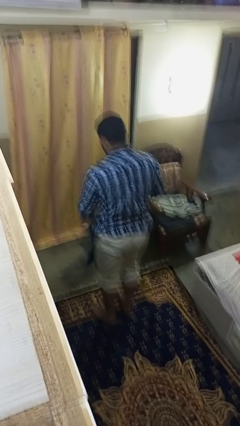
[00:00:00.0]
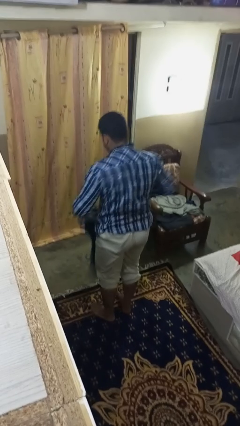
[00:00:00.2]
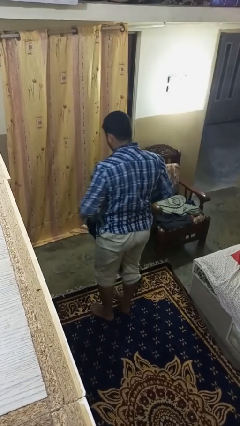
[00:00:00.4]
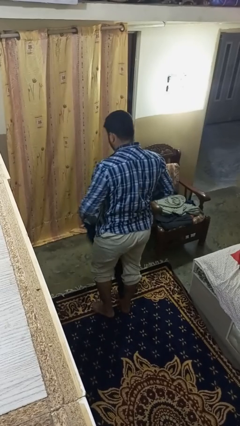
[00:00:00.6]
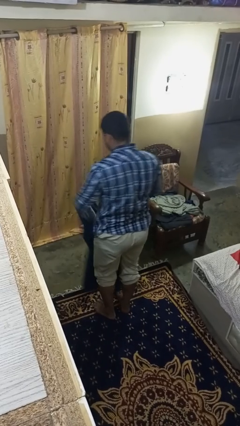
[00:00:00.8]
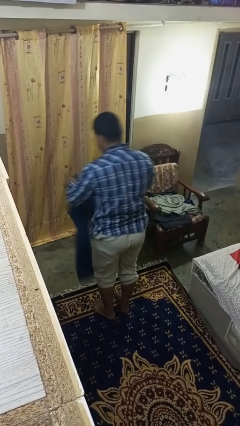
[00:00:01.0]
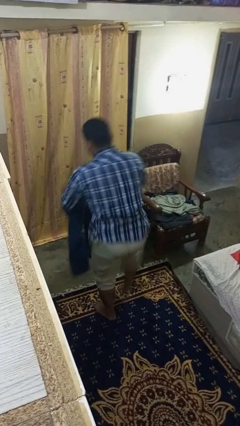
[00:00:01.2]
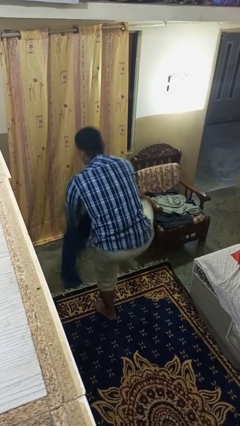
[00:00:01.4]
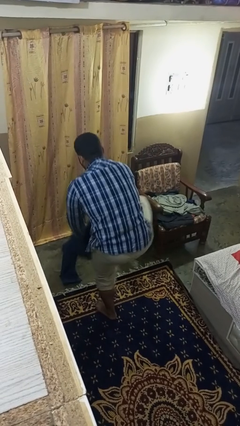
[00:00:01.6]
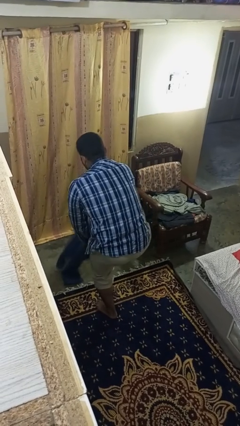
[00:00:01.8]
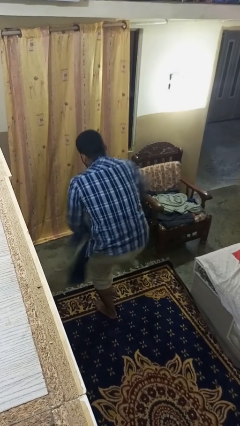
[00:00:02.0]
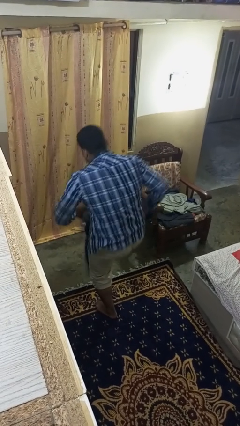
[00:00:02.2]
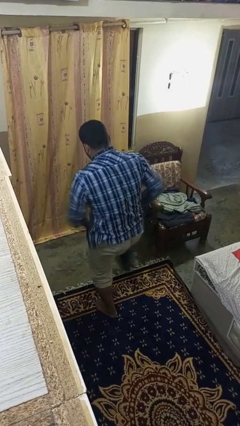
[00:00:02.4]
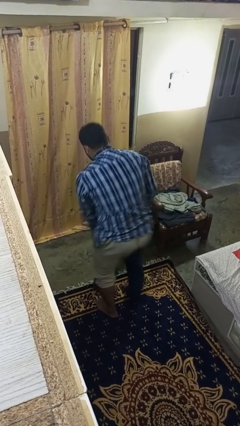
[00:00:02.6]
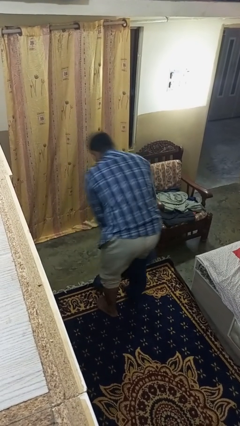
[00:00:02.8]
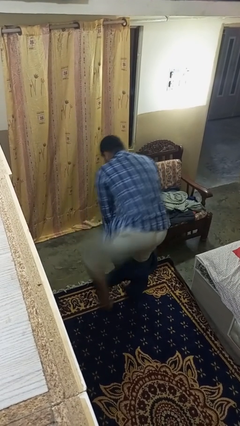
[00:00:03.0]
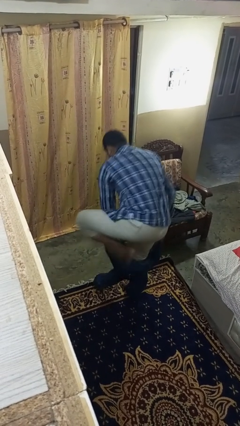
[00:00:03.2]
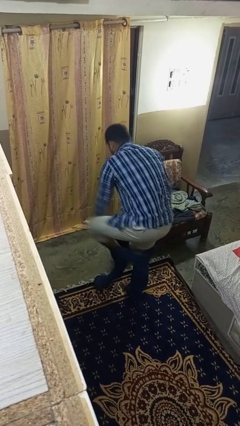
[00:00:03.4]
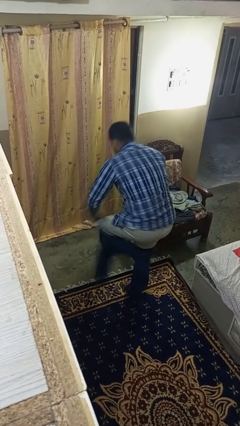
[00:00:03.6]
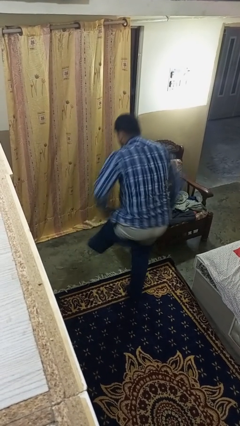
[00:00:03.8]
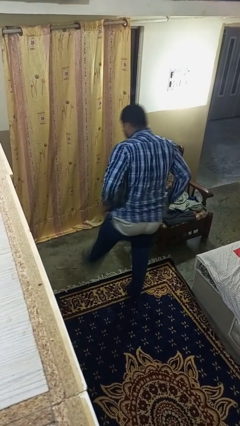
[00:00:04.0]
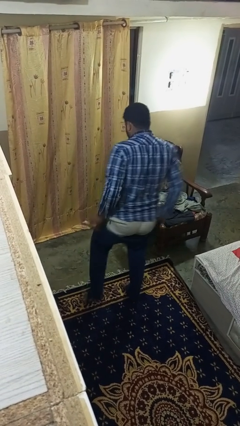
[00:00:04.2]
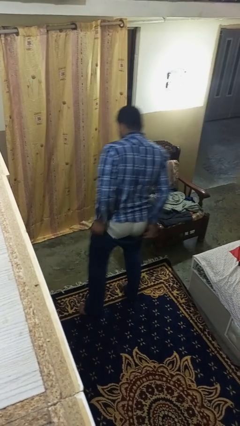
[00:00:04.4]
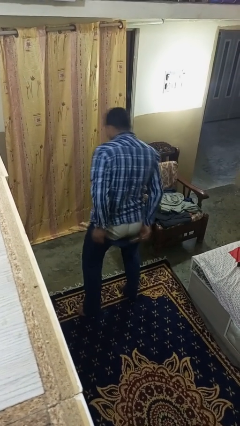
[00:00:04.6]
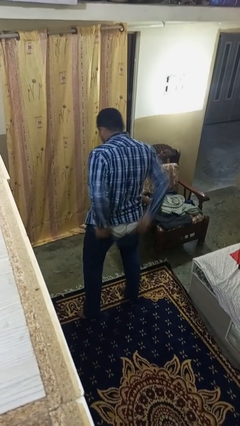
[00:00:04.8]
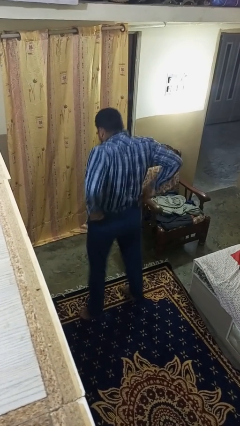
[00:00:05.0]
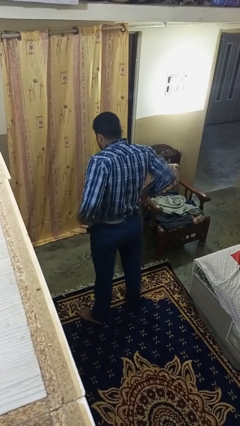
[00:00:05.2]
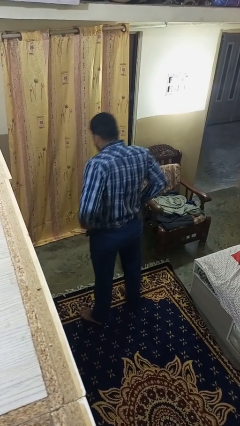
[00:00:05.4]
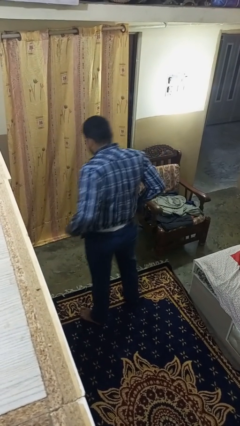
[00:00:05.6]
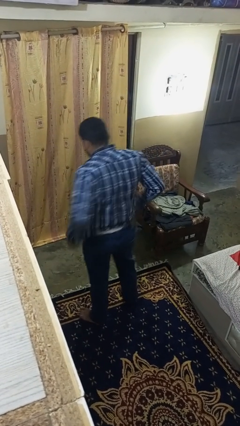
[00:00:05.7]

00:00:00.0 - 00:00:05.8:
person puts on pants

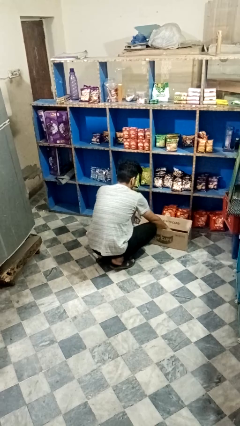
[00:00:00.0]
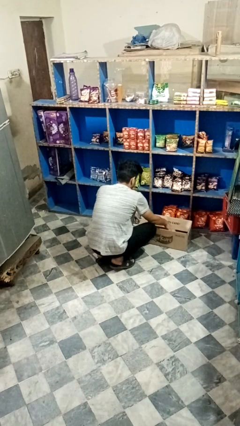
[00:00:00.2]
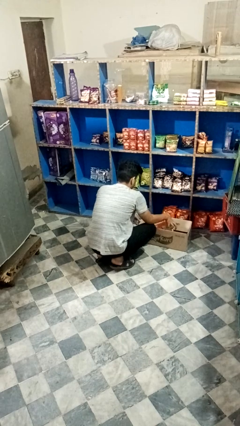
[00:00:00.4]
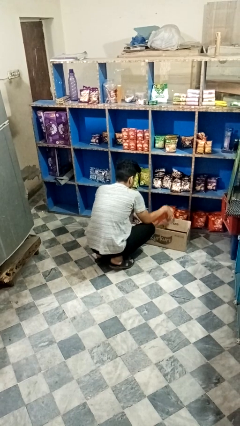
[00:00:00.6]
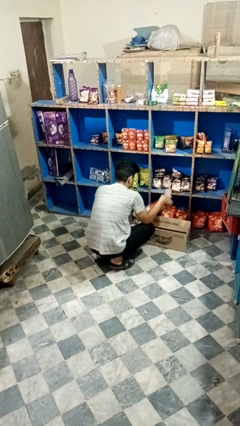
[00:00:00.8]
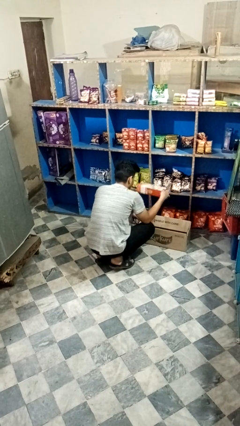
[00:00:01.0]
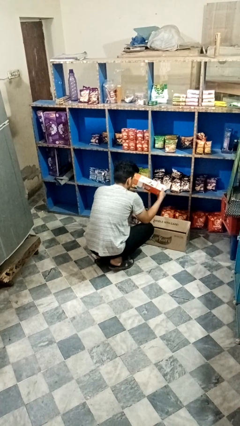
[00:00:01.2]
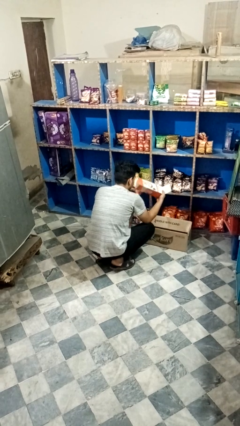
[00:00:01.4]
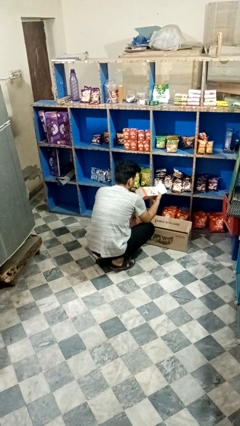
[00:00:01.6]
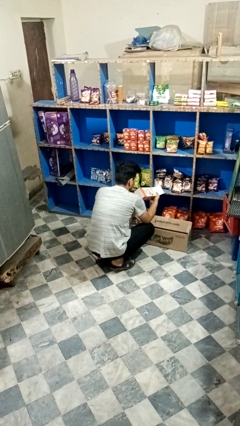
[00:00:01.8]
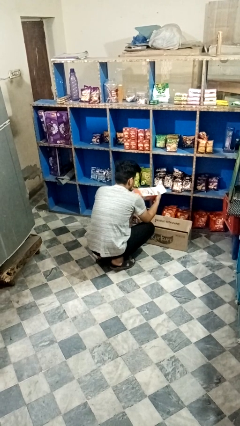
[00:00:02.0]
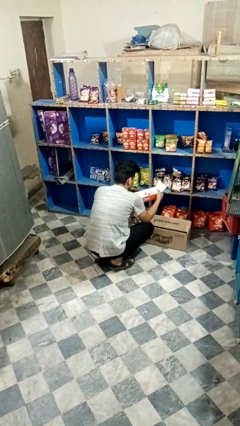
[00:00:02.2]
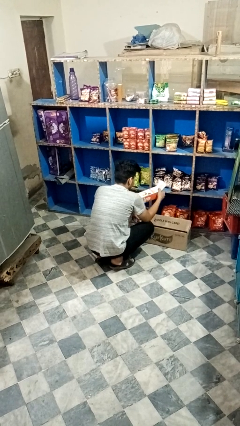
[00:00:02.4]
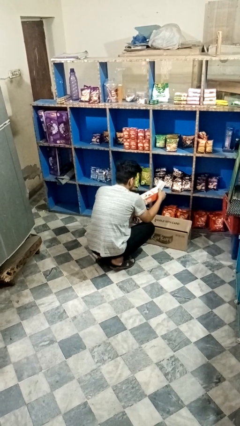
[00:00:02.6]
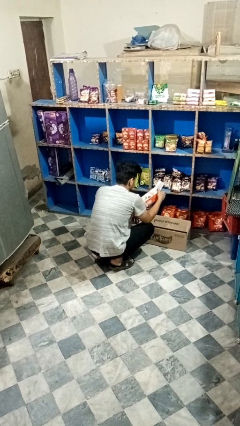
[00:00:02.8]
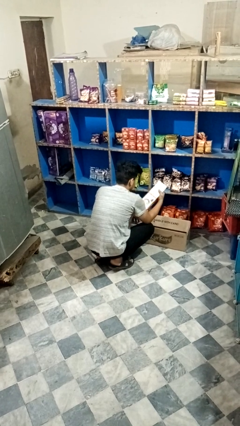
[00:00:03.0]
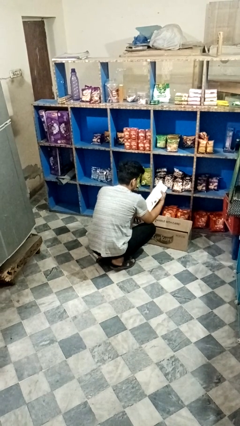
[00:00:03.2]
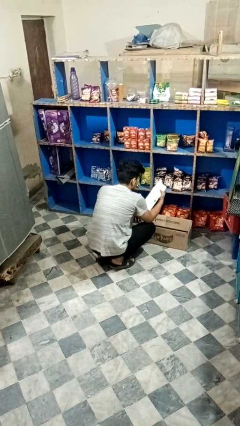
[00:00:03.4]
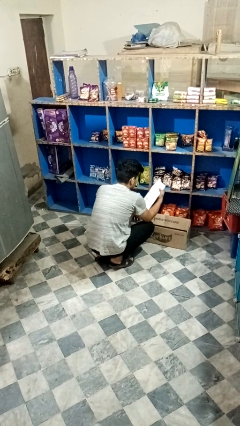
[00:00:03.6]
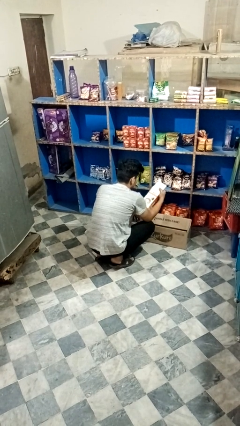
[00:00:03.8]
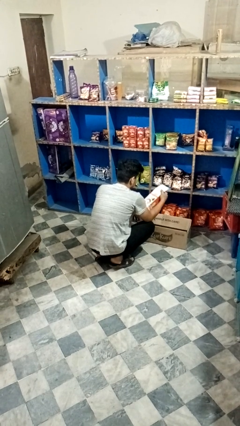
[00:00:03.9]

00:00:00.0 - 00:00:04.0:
person takes object from box

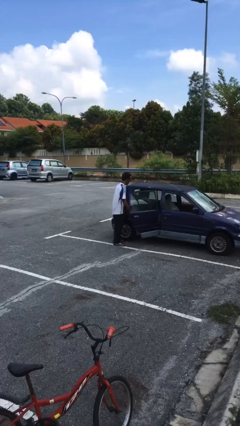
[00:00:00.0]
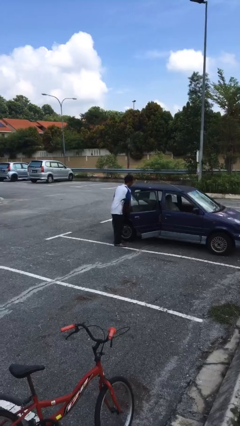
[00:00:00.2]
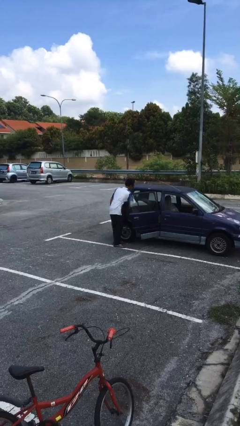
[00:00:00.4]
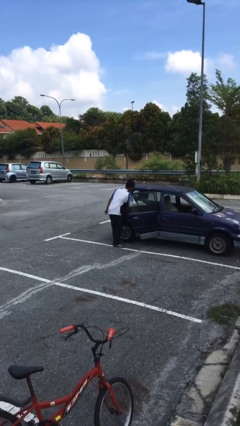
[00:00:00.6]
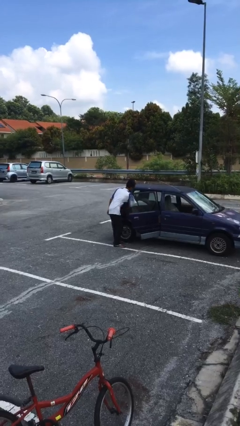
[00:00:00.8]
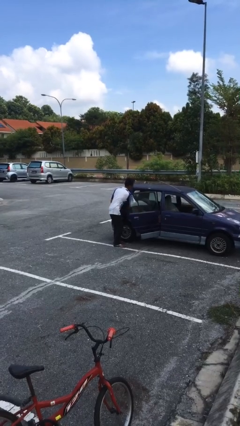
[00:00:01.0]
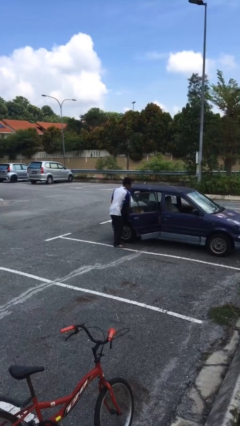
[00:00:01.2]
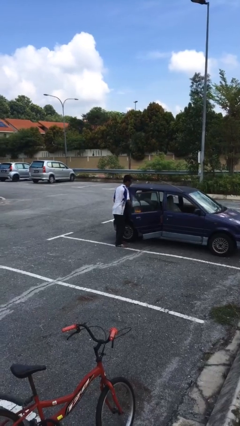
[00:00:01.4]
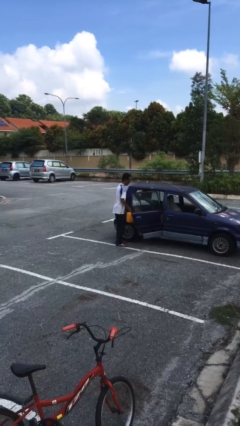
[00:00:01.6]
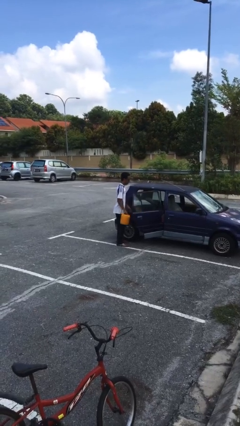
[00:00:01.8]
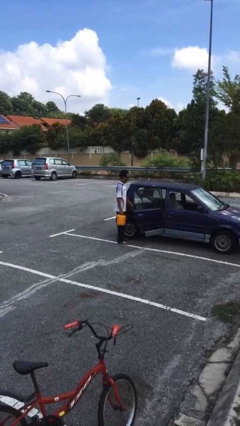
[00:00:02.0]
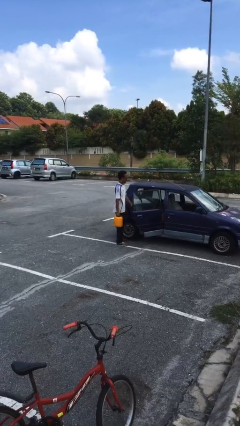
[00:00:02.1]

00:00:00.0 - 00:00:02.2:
person unloads car

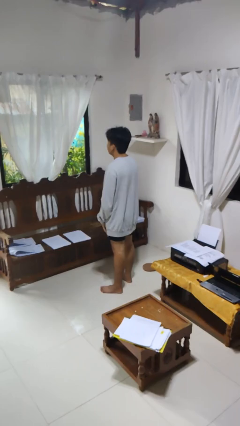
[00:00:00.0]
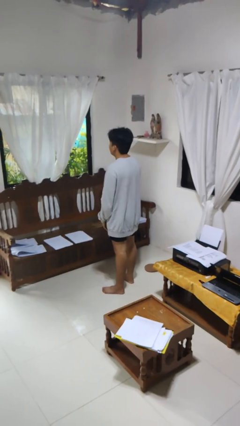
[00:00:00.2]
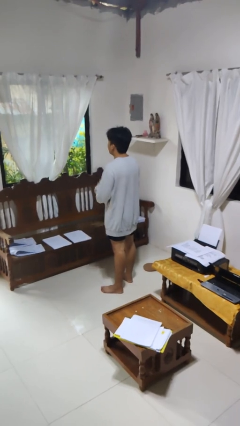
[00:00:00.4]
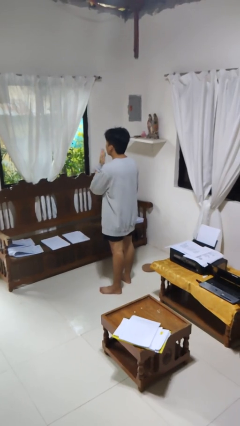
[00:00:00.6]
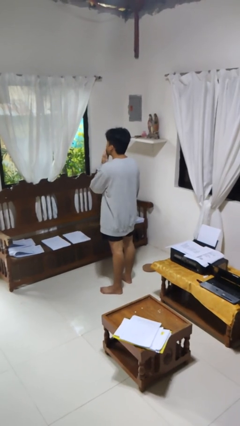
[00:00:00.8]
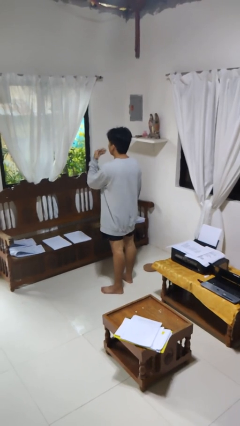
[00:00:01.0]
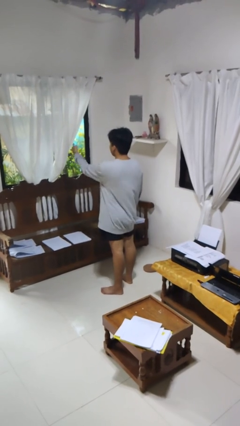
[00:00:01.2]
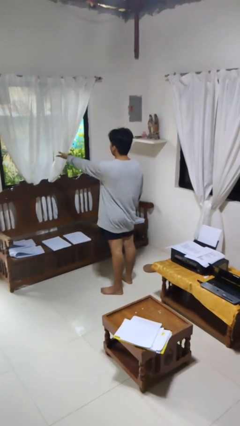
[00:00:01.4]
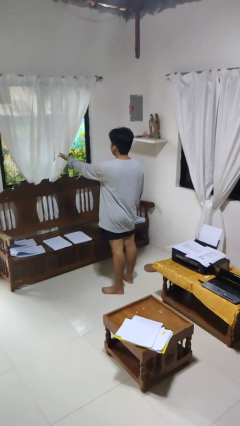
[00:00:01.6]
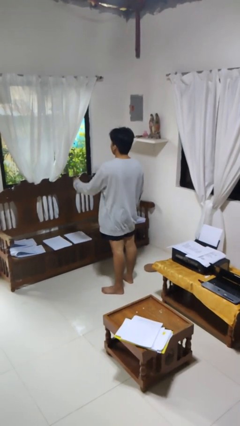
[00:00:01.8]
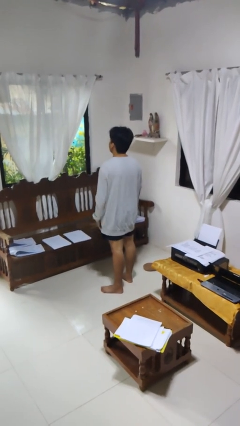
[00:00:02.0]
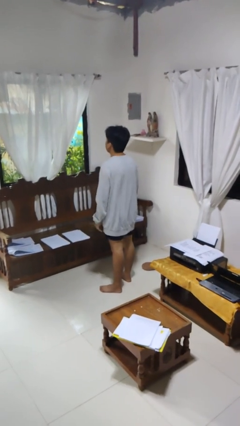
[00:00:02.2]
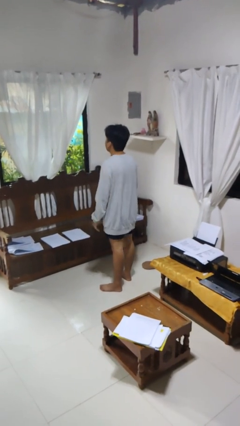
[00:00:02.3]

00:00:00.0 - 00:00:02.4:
person gestures blow kiss

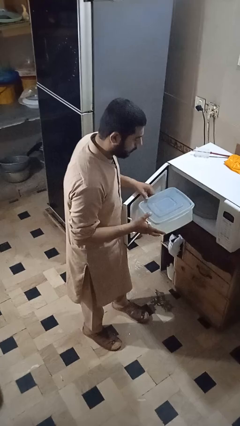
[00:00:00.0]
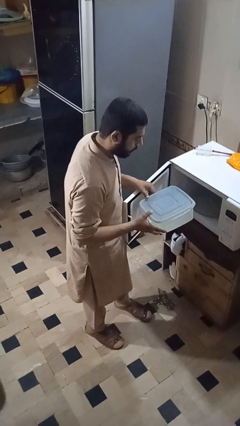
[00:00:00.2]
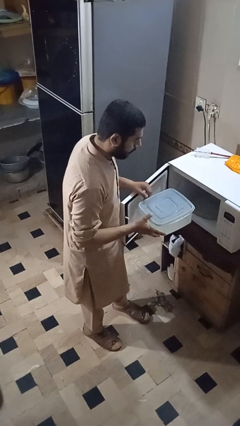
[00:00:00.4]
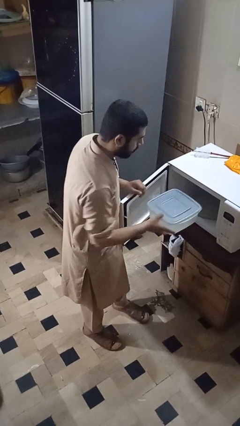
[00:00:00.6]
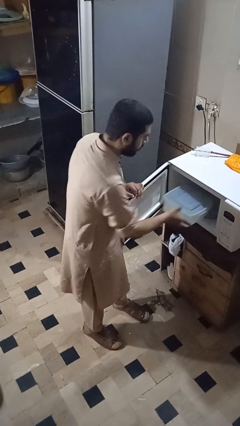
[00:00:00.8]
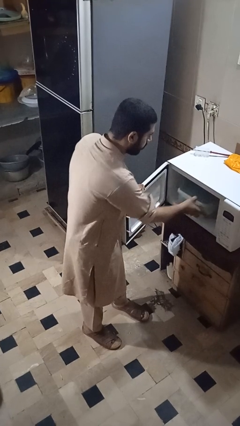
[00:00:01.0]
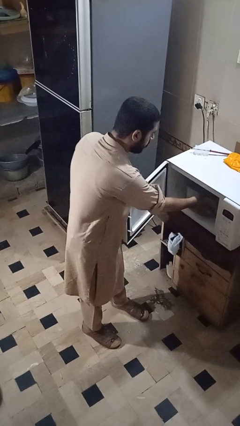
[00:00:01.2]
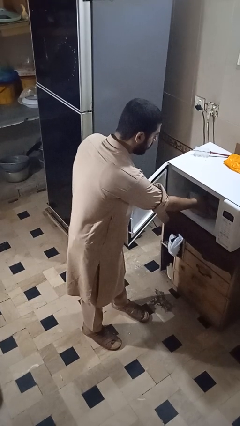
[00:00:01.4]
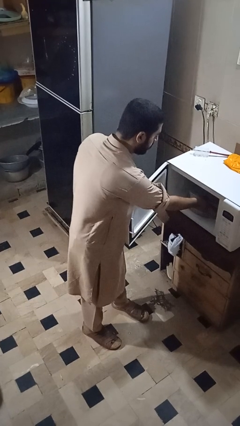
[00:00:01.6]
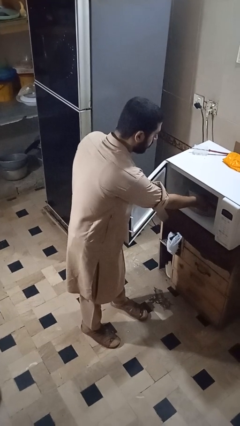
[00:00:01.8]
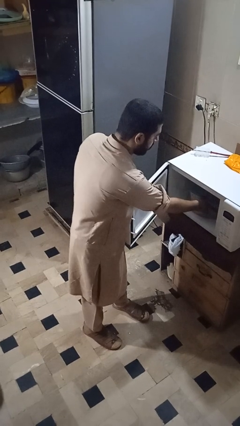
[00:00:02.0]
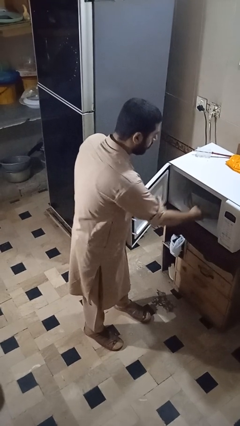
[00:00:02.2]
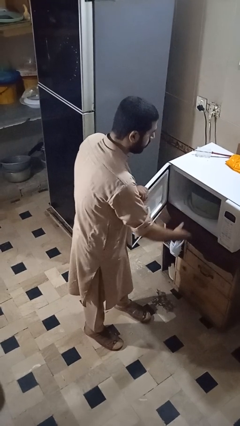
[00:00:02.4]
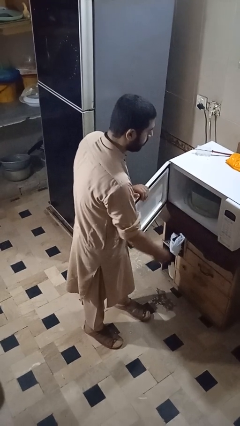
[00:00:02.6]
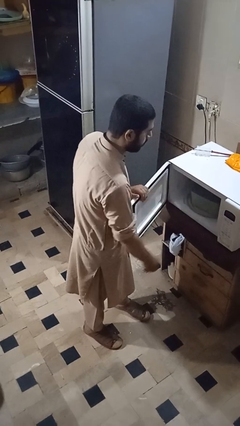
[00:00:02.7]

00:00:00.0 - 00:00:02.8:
person puts object into microwave
